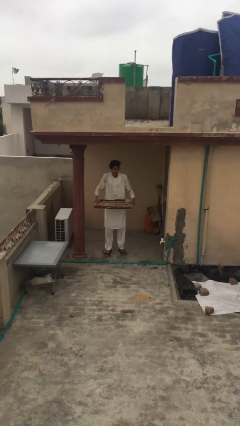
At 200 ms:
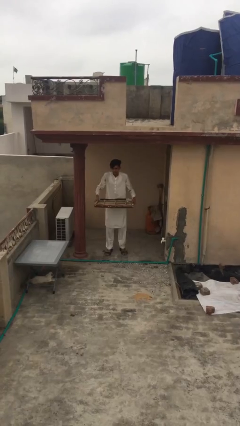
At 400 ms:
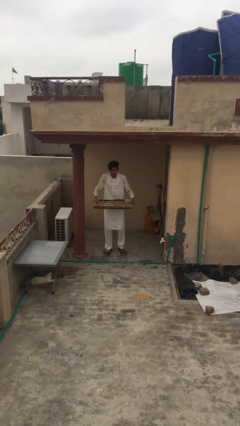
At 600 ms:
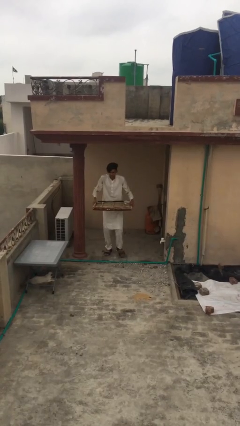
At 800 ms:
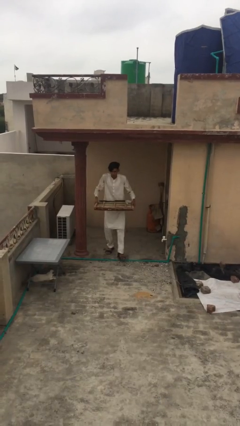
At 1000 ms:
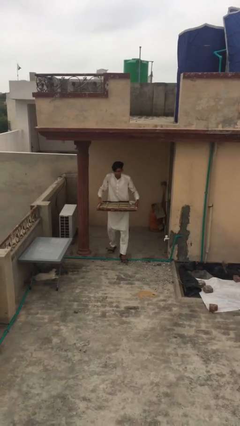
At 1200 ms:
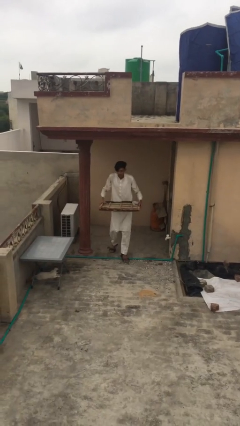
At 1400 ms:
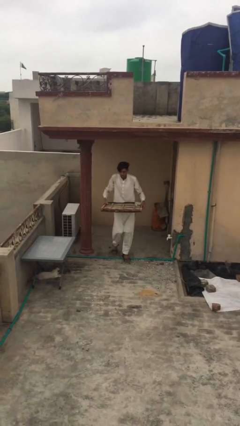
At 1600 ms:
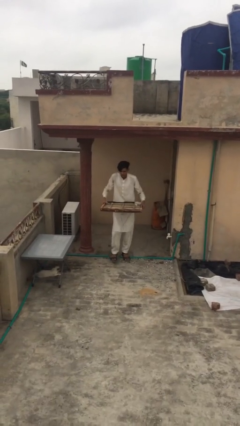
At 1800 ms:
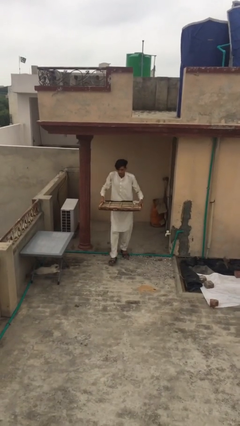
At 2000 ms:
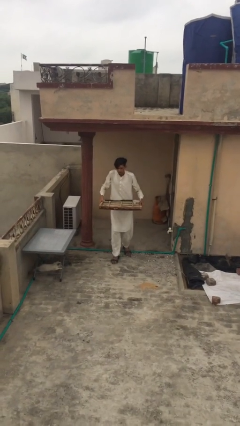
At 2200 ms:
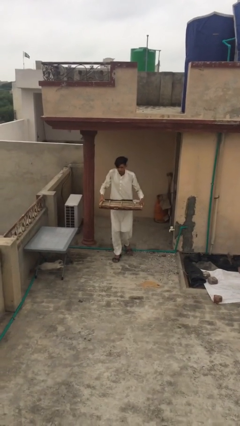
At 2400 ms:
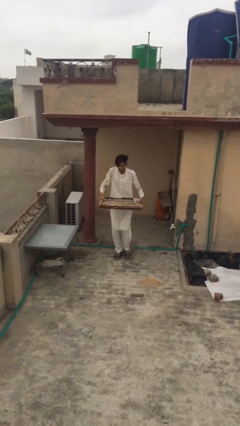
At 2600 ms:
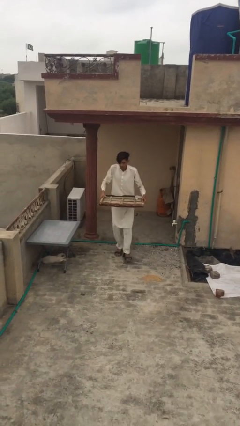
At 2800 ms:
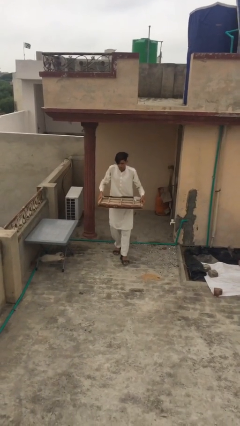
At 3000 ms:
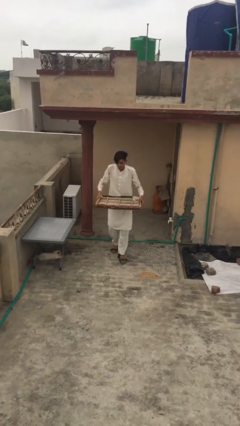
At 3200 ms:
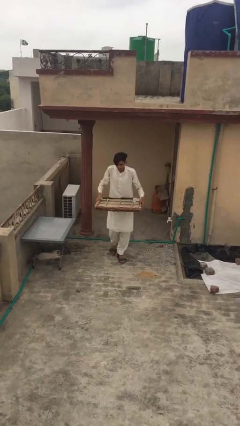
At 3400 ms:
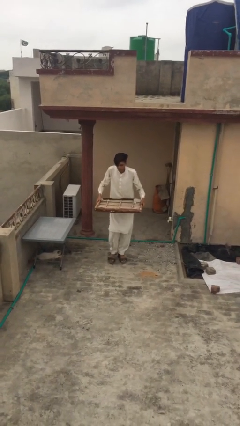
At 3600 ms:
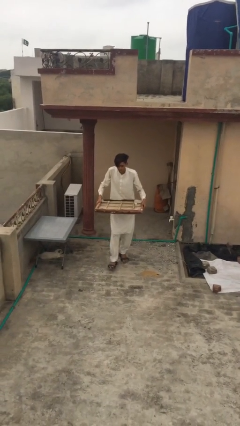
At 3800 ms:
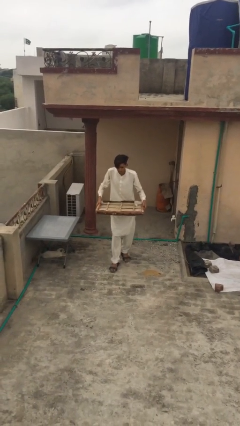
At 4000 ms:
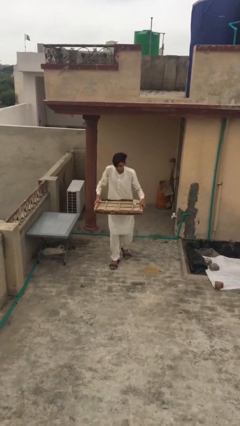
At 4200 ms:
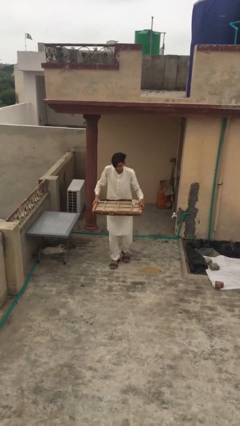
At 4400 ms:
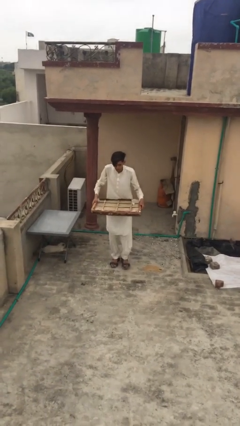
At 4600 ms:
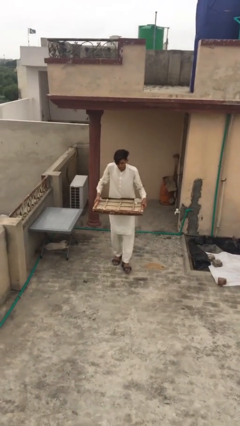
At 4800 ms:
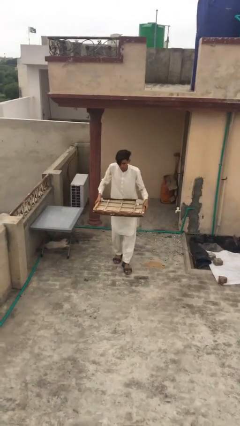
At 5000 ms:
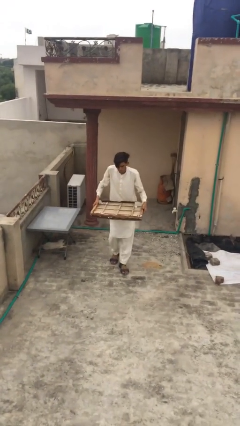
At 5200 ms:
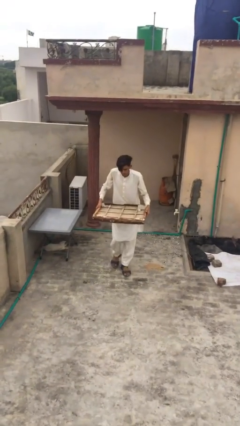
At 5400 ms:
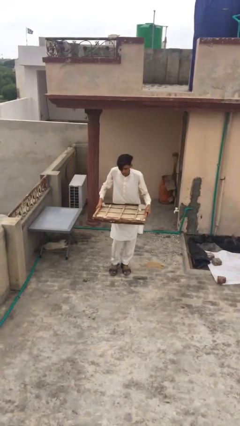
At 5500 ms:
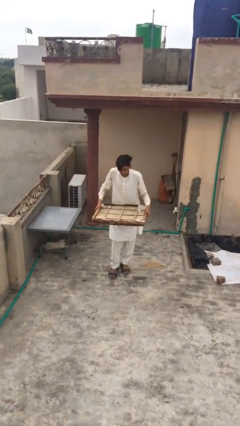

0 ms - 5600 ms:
person carries heavy object

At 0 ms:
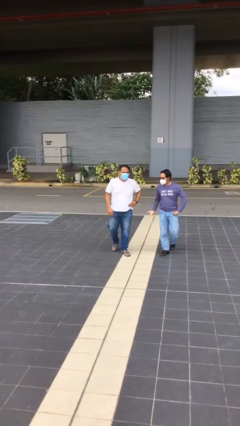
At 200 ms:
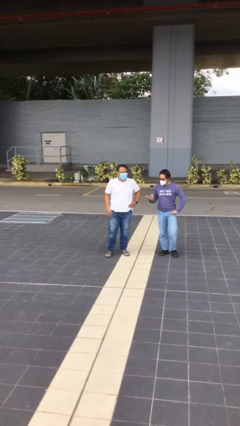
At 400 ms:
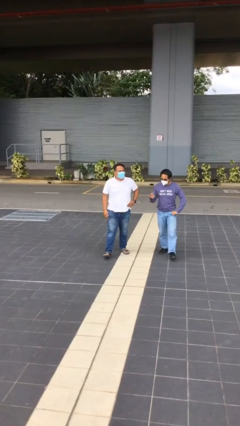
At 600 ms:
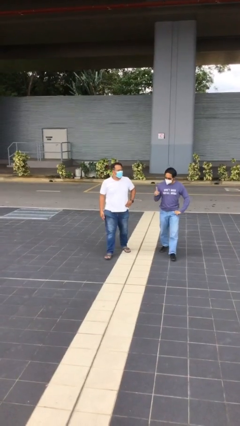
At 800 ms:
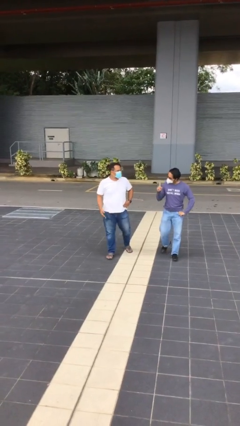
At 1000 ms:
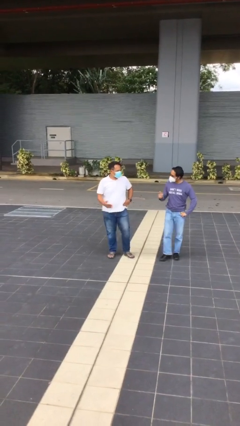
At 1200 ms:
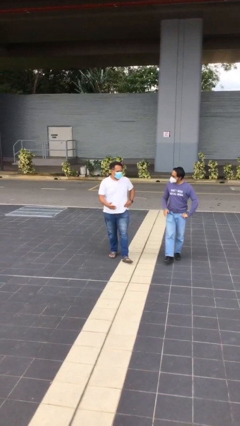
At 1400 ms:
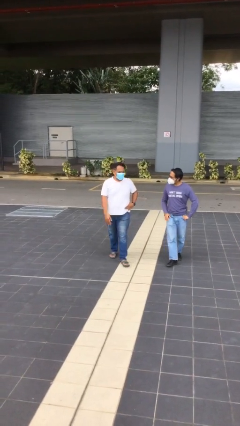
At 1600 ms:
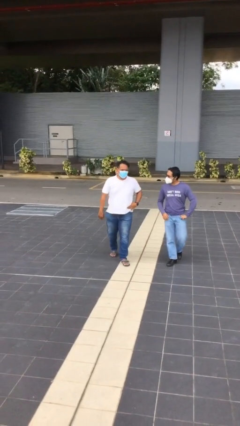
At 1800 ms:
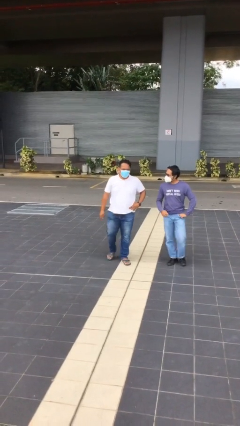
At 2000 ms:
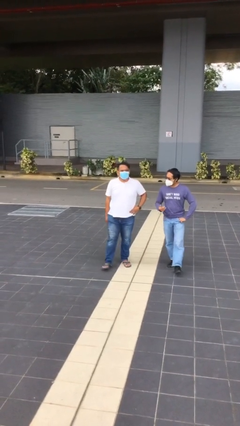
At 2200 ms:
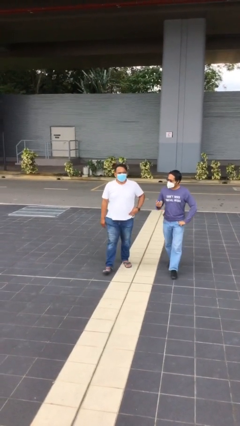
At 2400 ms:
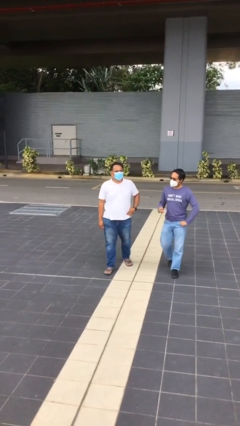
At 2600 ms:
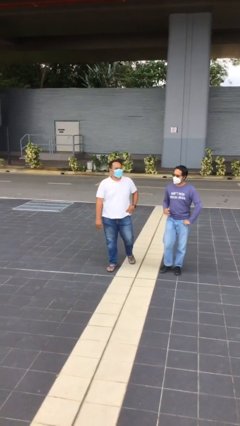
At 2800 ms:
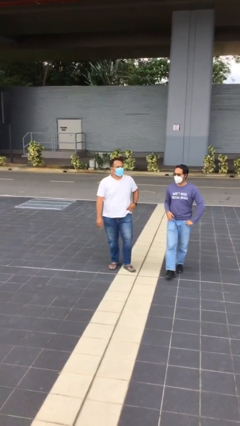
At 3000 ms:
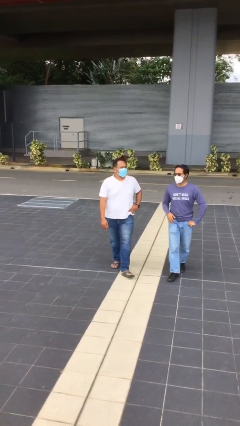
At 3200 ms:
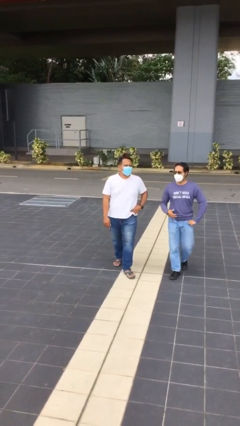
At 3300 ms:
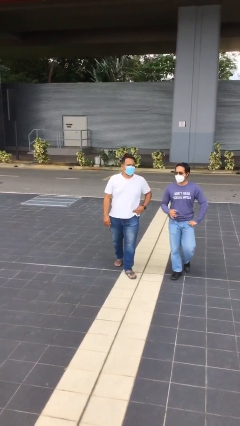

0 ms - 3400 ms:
person talks to person

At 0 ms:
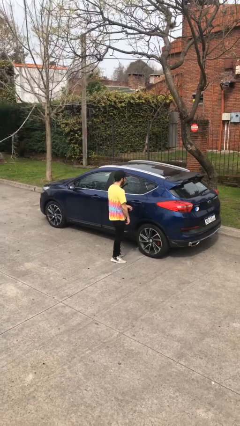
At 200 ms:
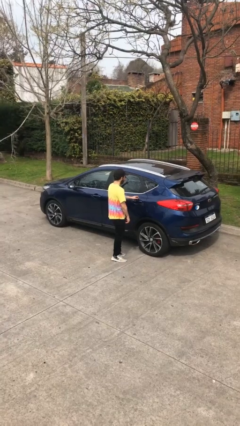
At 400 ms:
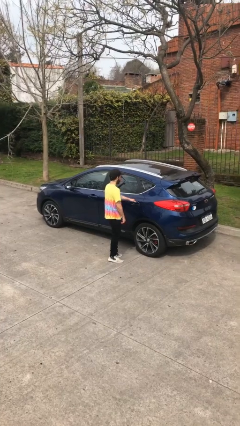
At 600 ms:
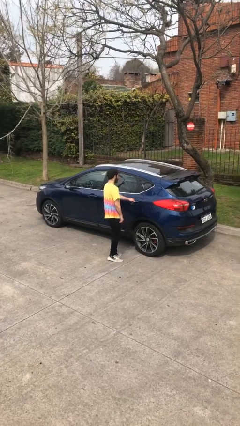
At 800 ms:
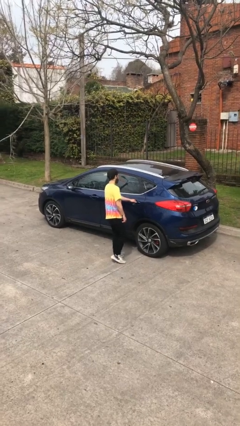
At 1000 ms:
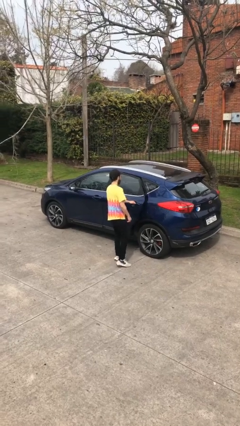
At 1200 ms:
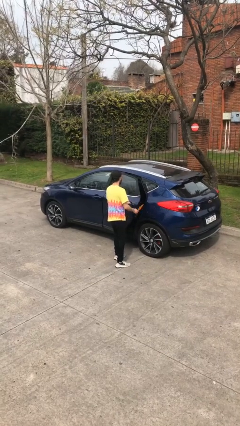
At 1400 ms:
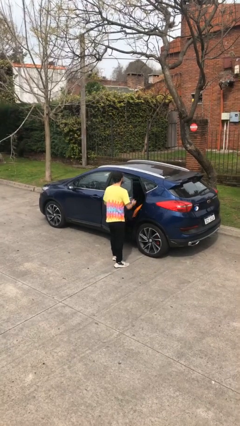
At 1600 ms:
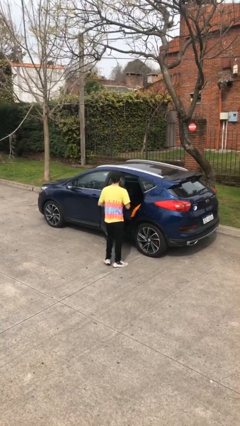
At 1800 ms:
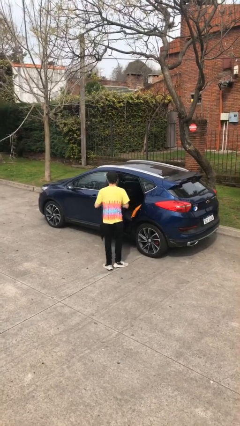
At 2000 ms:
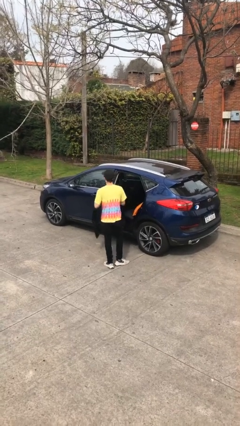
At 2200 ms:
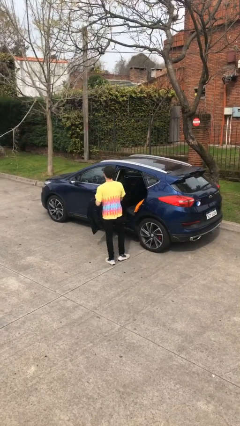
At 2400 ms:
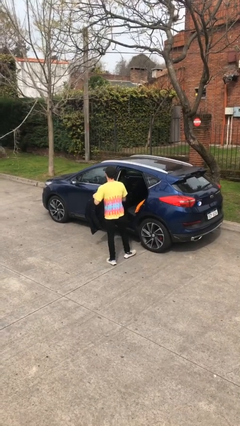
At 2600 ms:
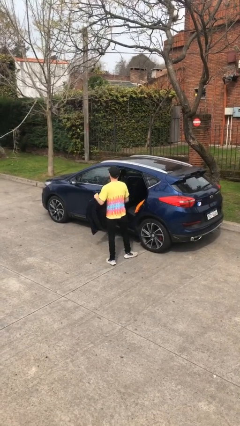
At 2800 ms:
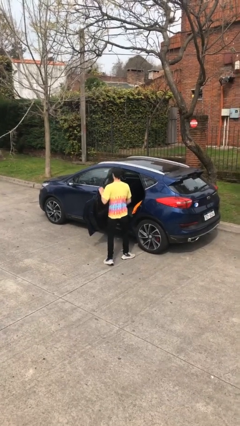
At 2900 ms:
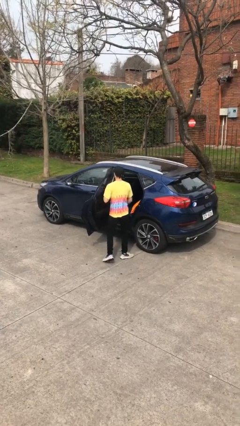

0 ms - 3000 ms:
person opens car door

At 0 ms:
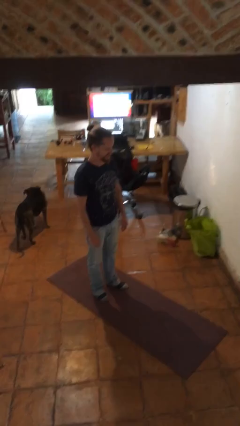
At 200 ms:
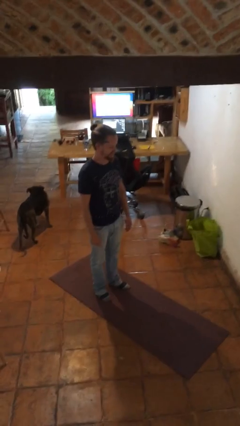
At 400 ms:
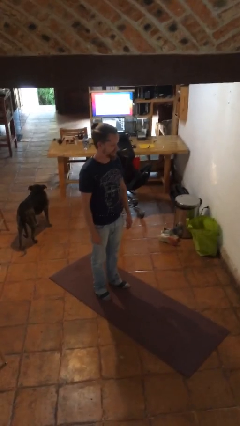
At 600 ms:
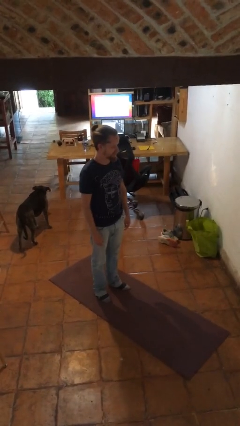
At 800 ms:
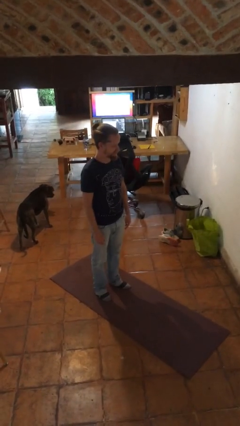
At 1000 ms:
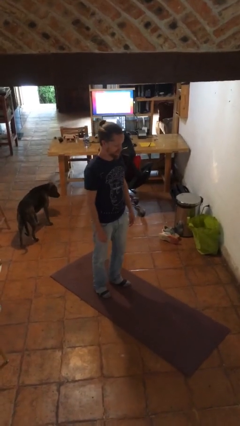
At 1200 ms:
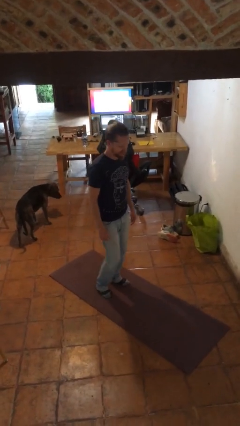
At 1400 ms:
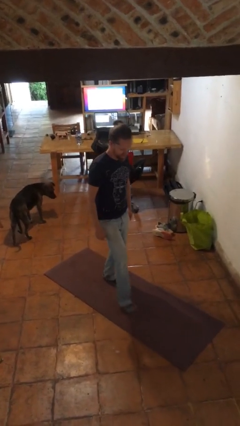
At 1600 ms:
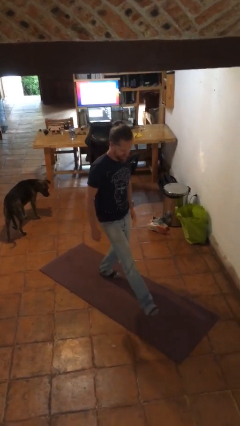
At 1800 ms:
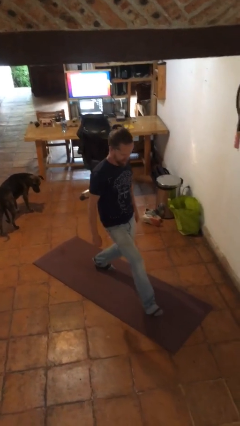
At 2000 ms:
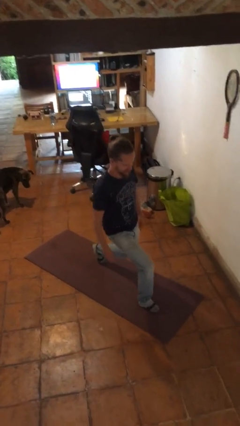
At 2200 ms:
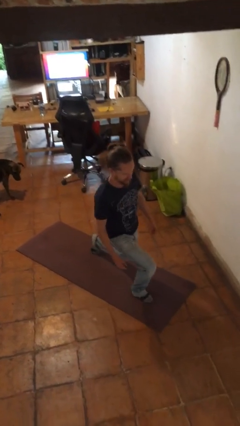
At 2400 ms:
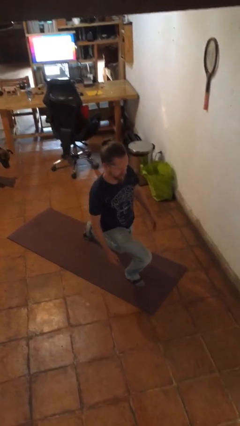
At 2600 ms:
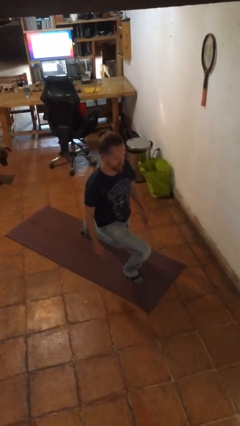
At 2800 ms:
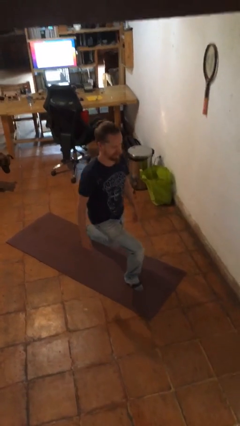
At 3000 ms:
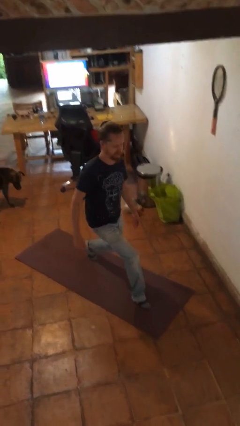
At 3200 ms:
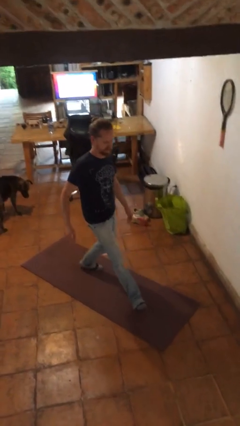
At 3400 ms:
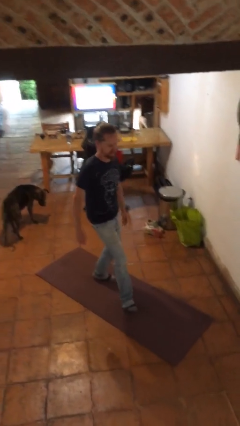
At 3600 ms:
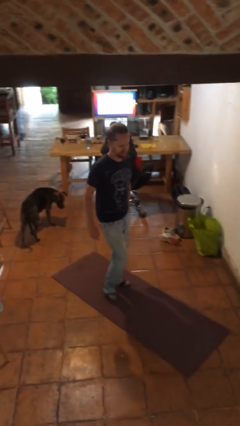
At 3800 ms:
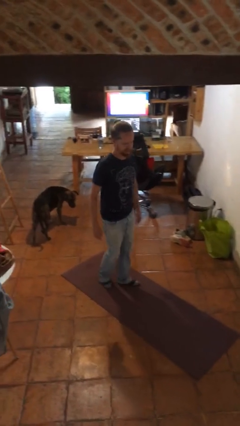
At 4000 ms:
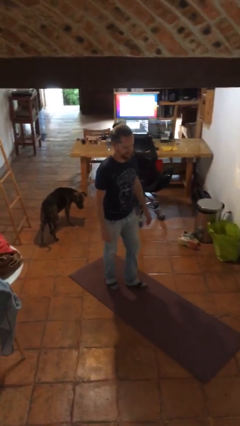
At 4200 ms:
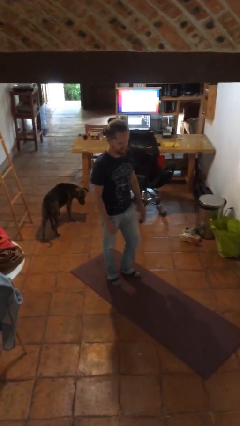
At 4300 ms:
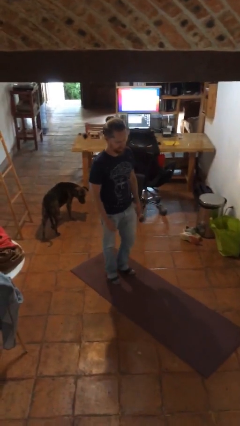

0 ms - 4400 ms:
person exercises with lunges

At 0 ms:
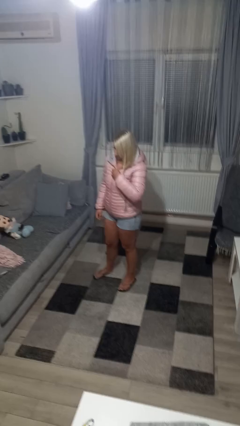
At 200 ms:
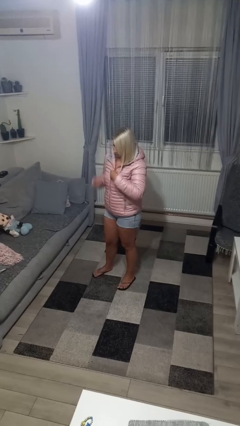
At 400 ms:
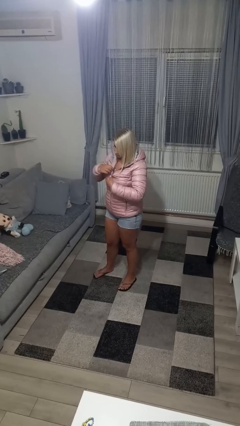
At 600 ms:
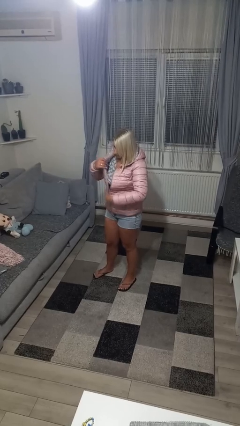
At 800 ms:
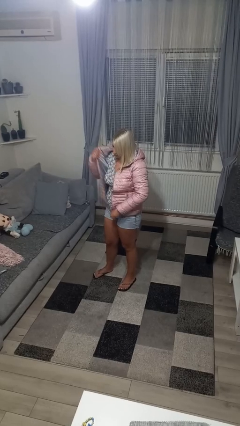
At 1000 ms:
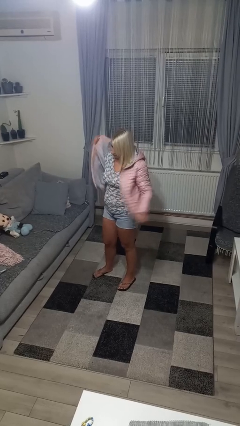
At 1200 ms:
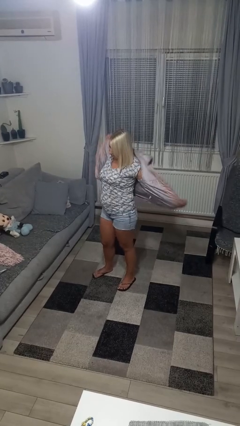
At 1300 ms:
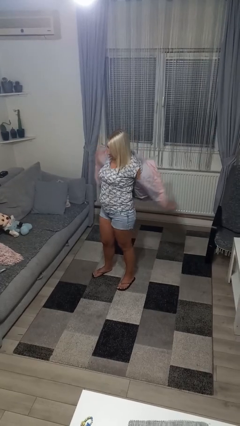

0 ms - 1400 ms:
person unzips jacket
